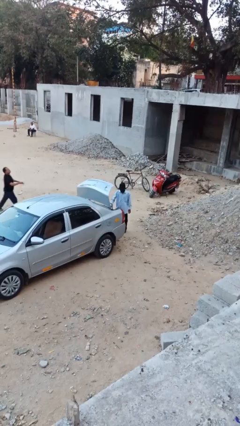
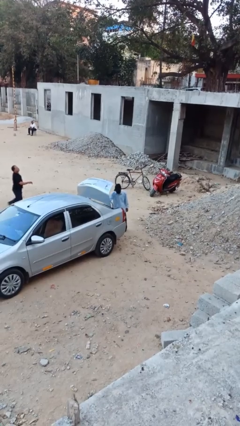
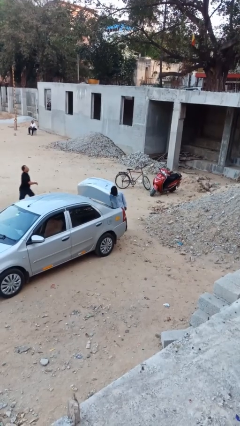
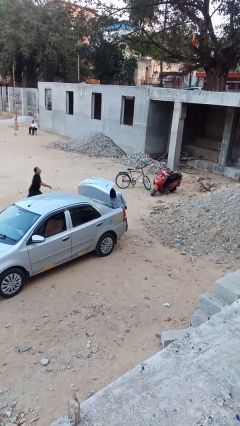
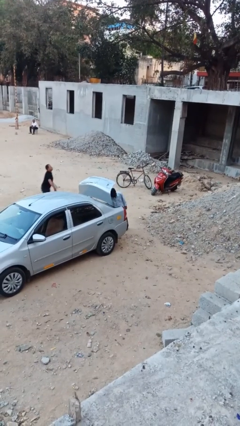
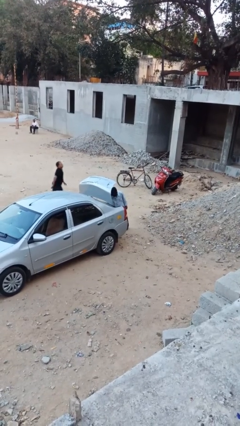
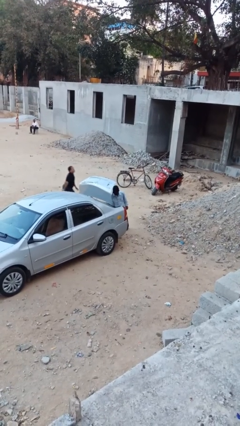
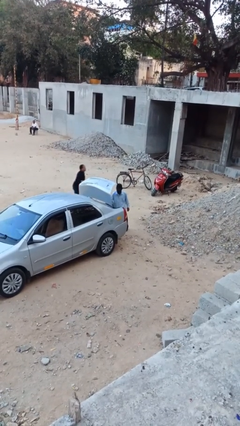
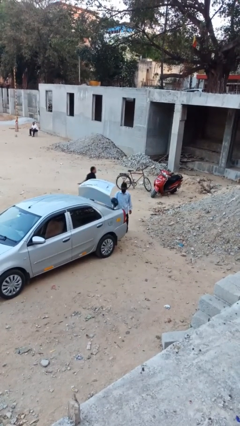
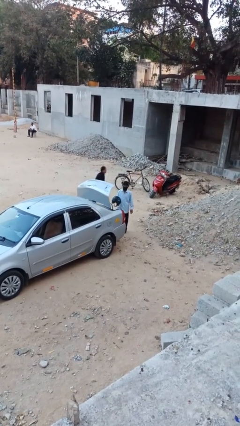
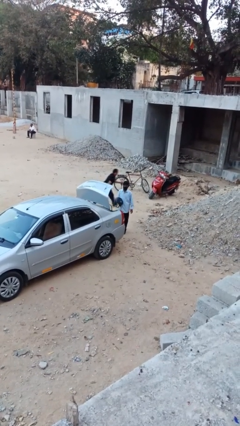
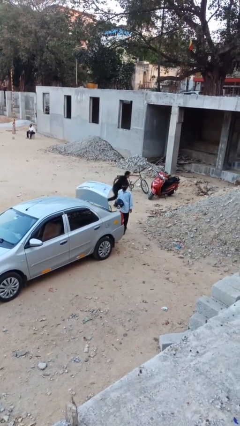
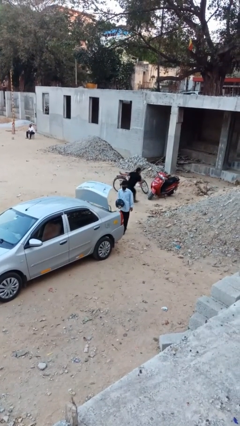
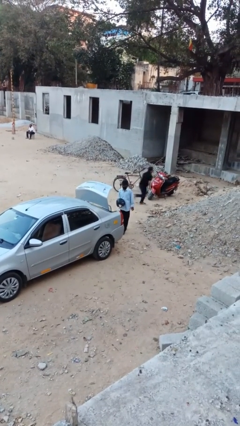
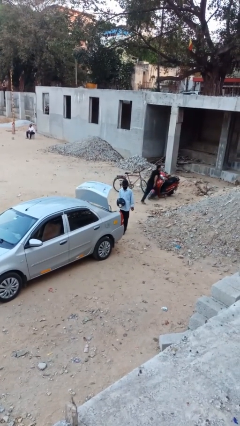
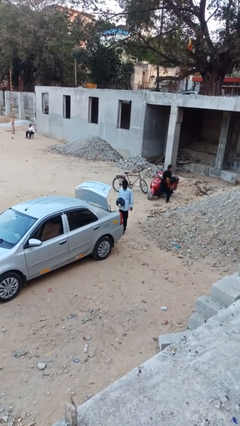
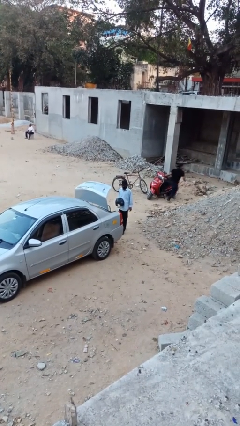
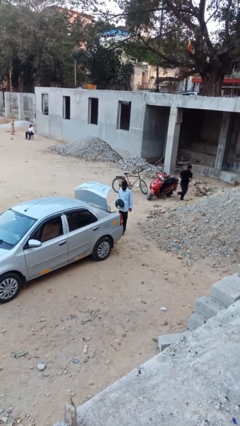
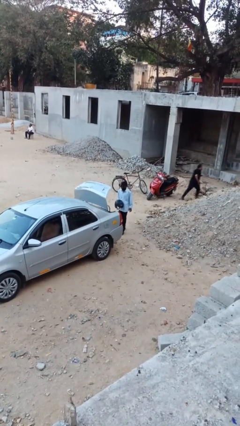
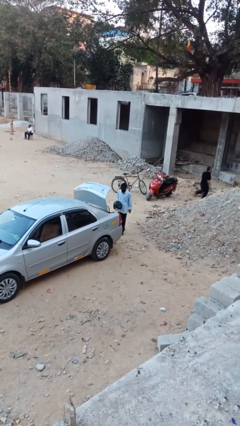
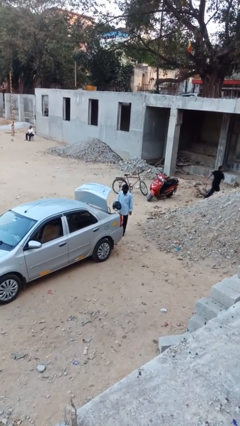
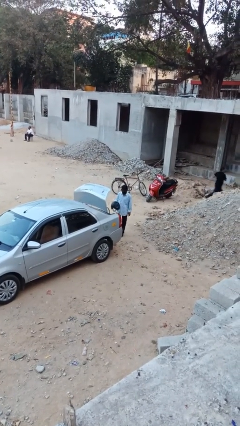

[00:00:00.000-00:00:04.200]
person unloads car

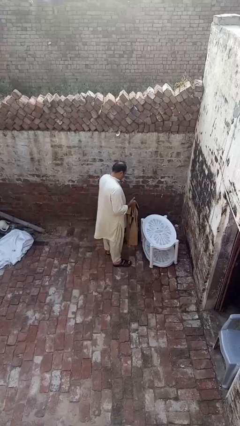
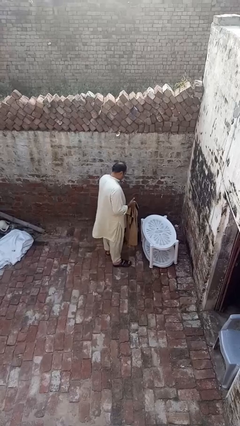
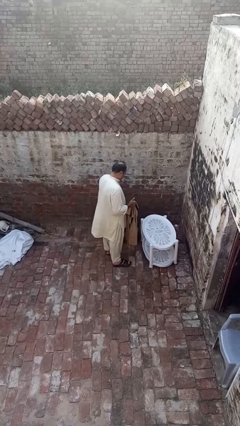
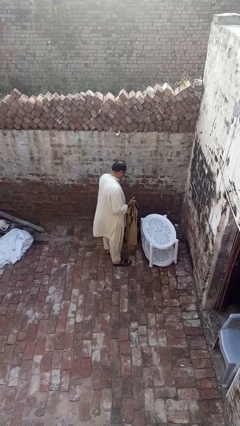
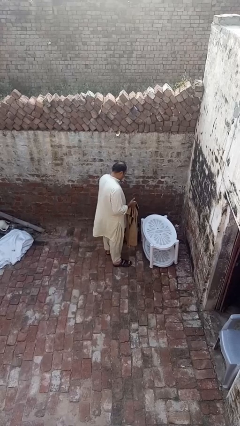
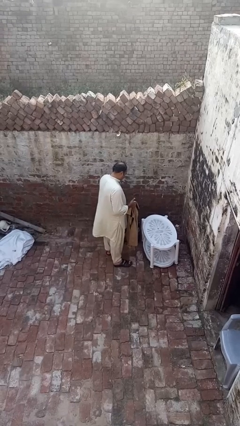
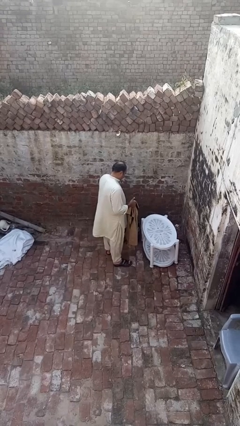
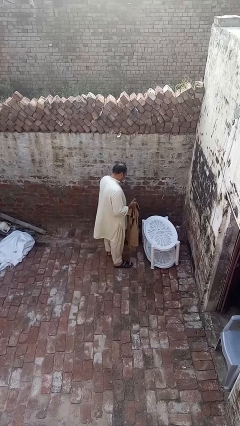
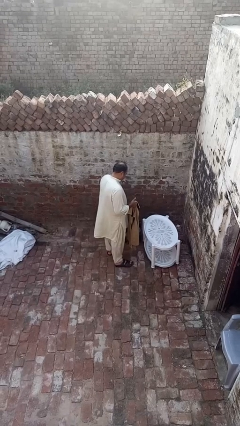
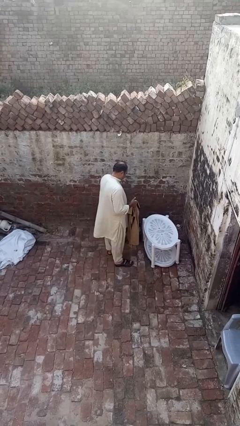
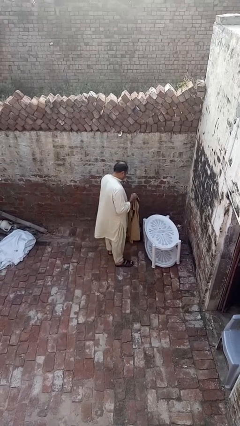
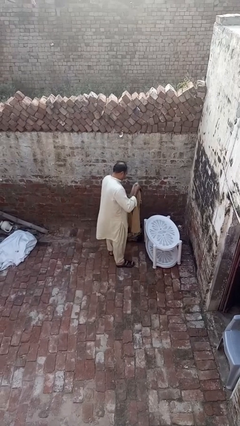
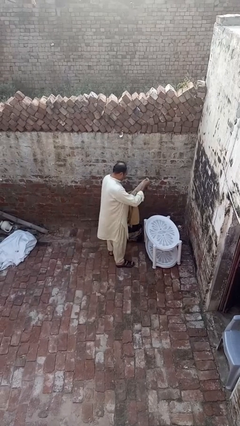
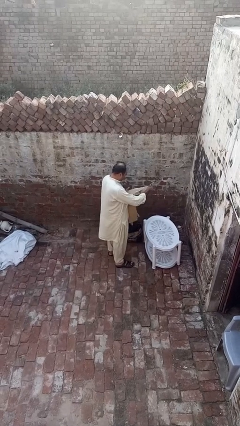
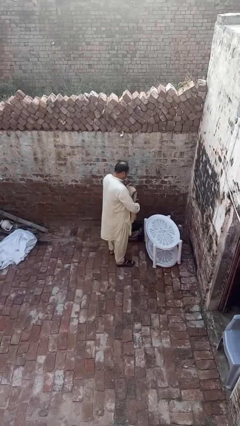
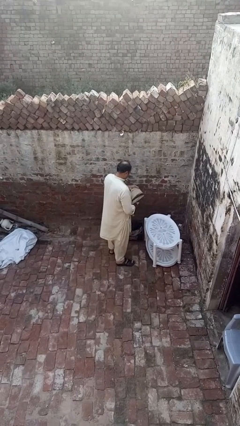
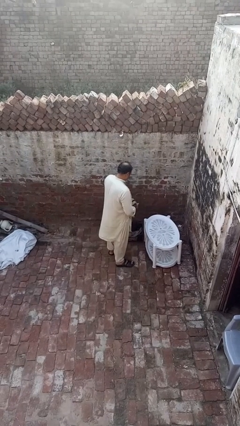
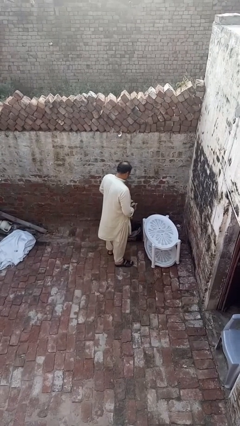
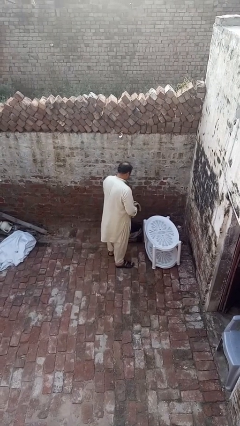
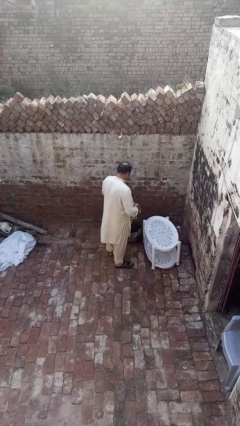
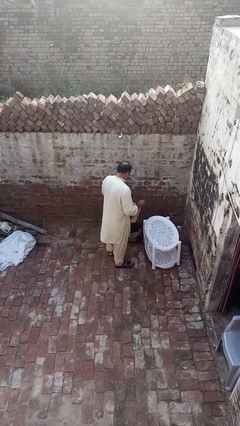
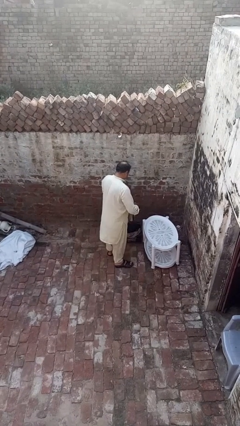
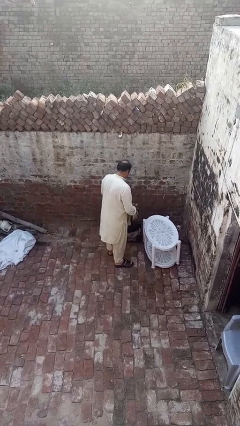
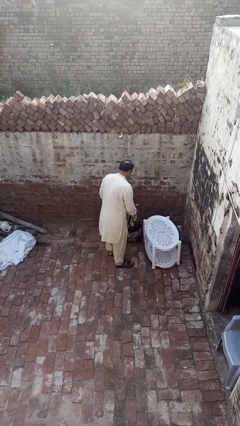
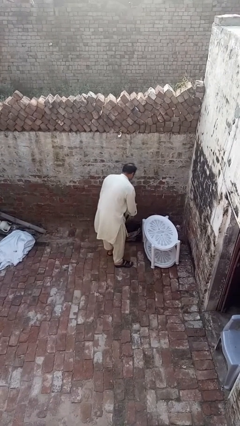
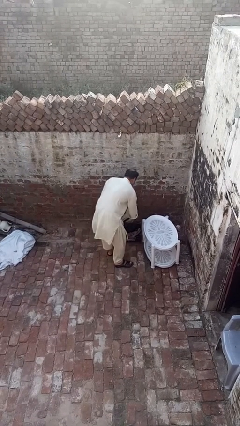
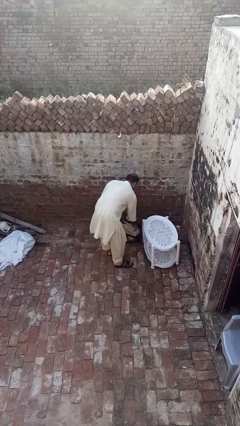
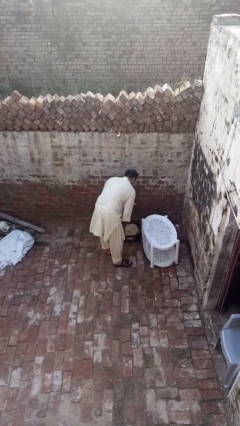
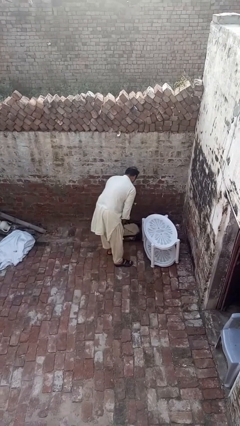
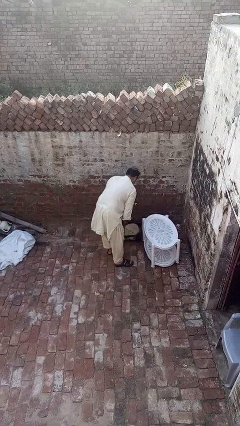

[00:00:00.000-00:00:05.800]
person folds shirt

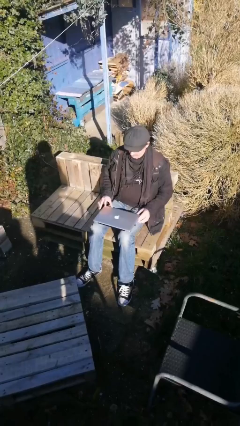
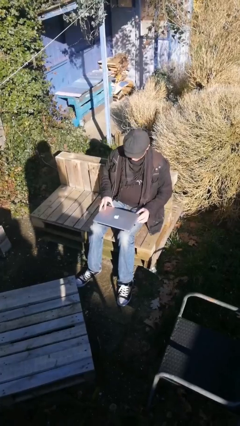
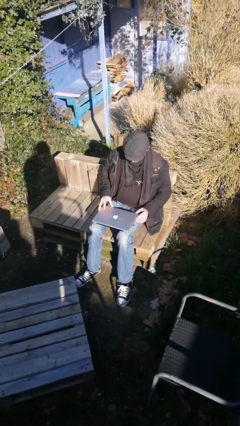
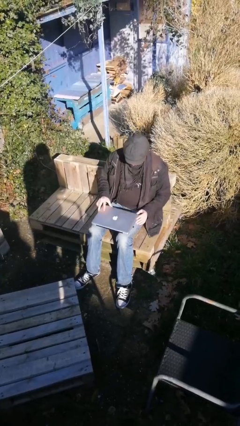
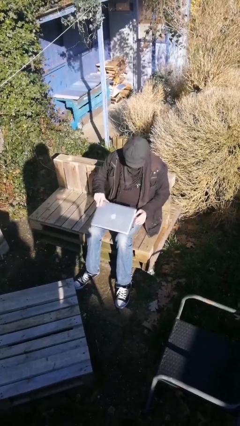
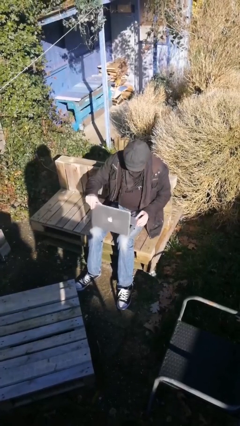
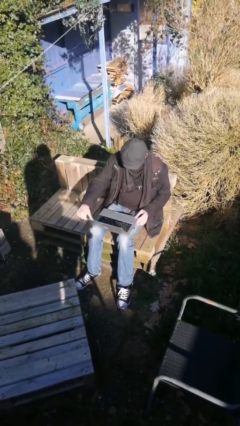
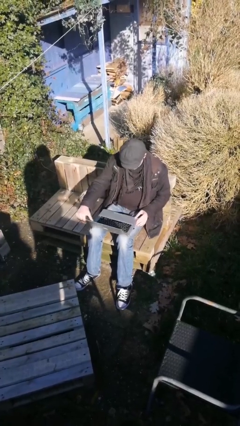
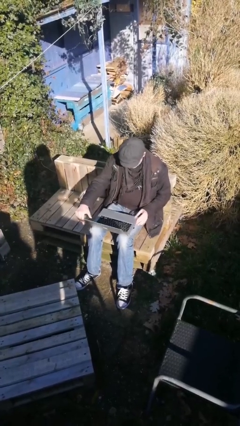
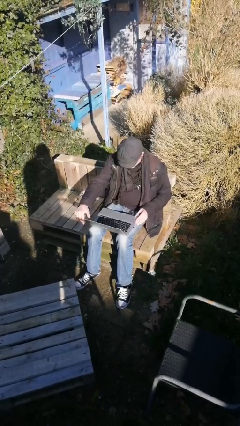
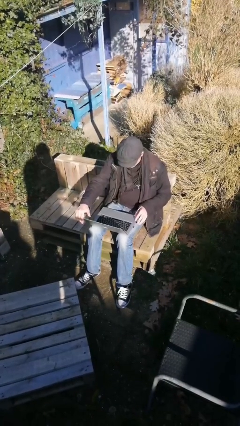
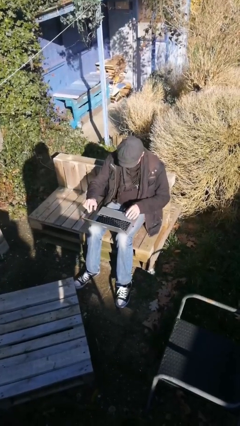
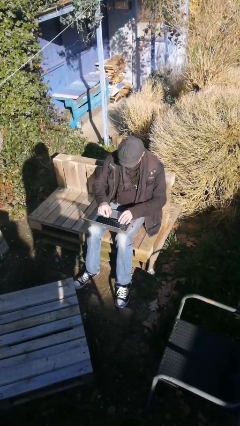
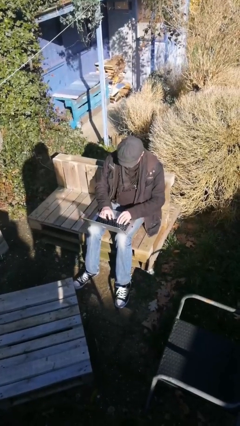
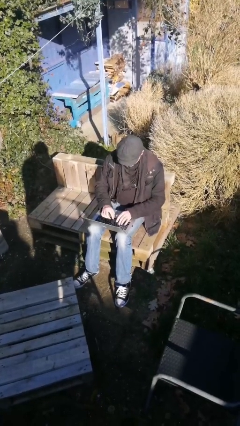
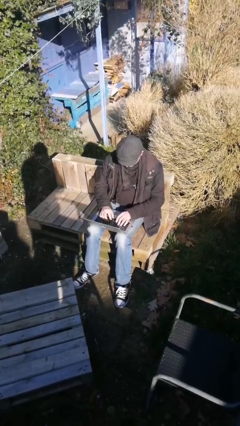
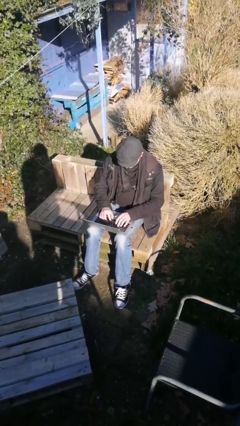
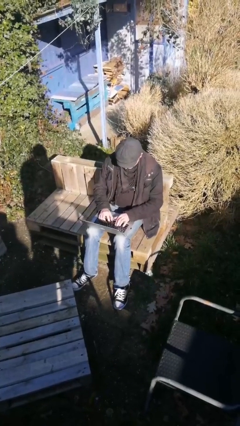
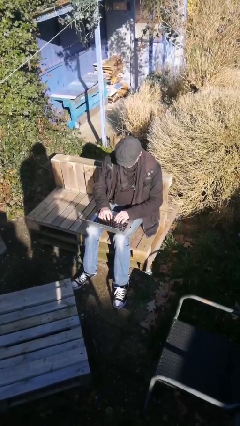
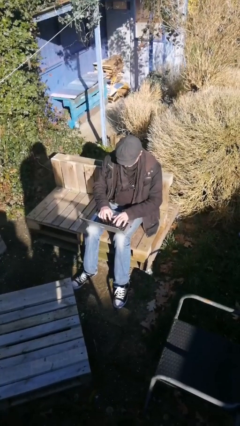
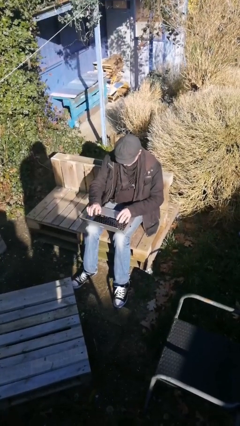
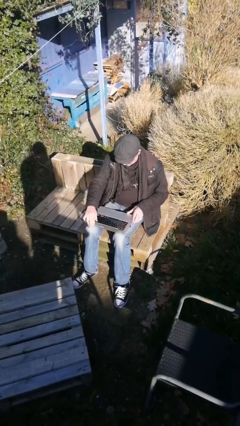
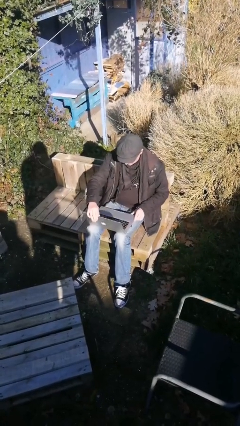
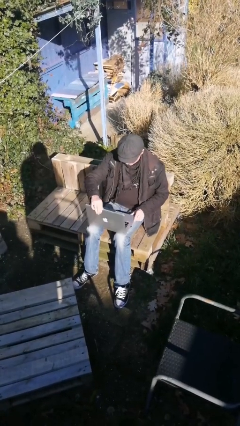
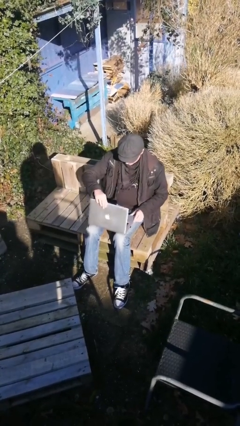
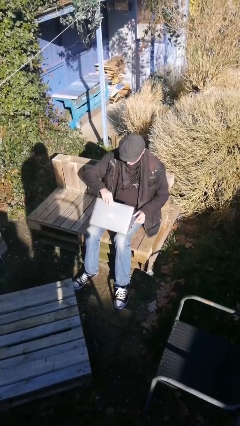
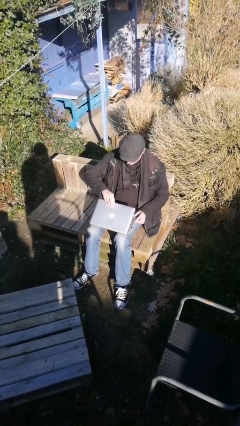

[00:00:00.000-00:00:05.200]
person interacts with laptop

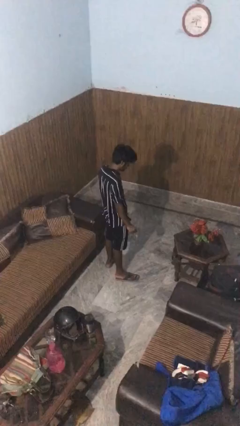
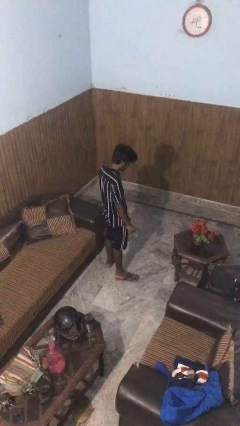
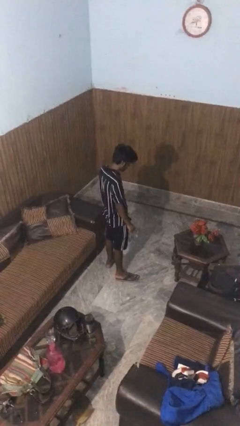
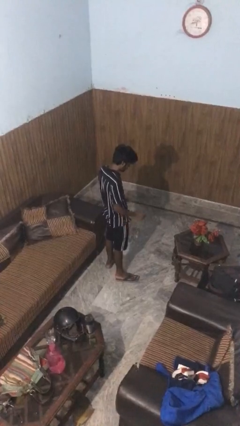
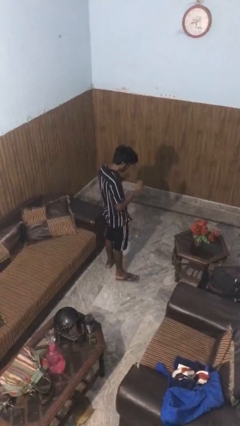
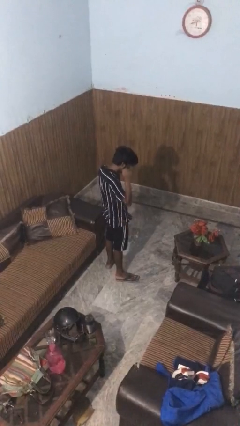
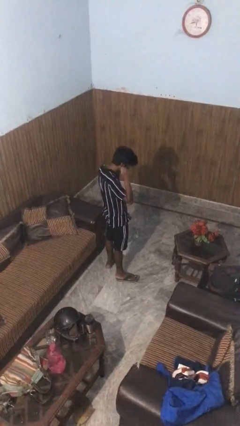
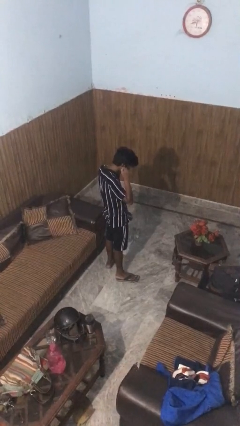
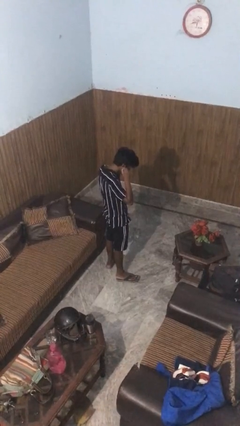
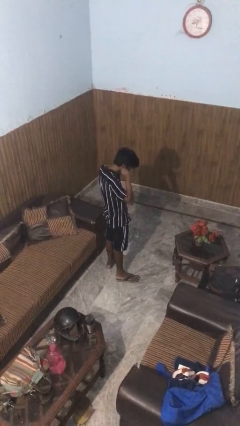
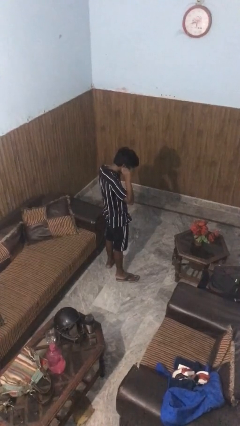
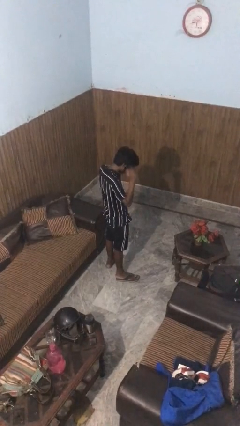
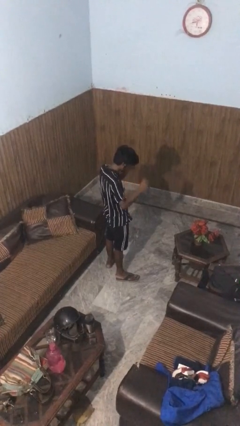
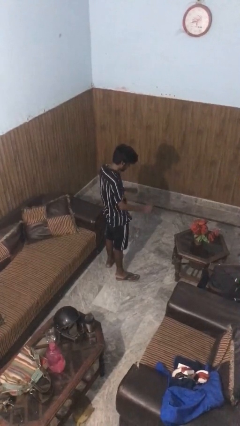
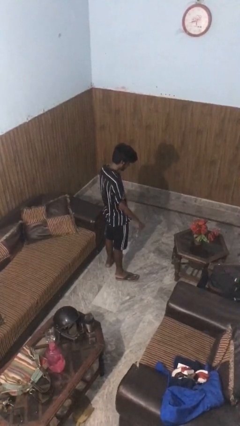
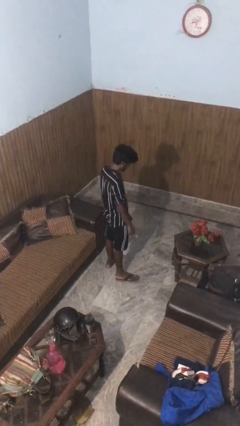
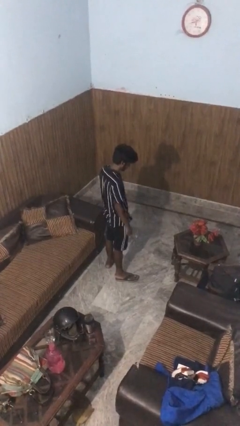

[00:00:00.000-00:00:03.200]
person puts on headphones
